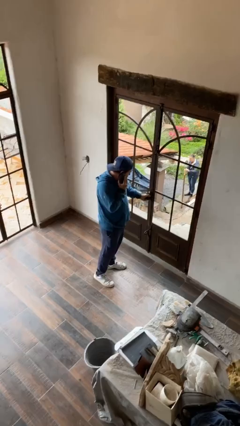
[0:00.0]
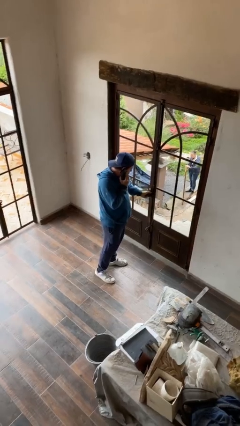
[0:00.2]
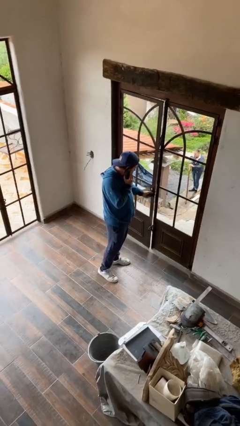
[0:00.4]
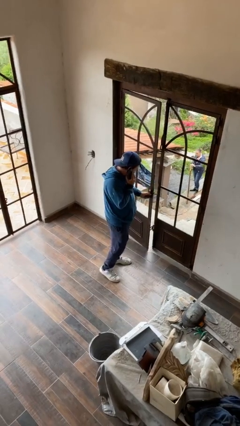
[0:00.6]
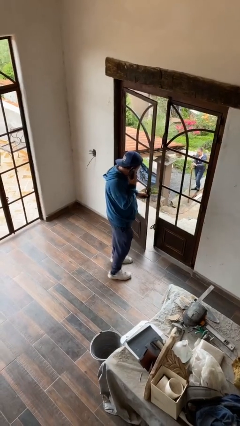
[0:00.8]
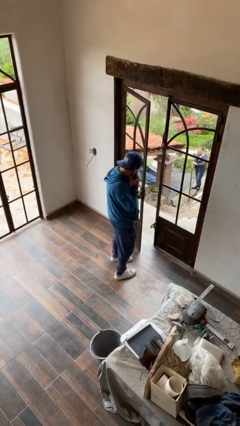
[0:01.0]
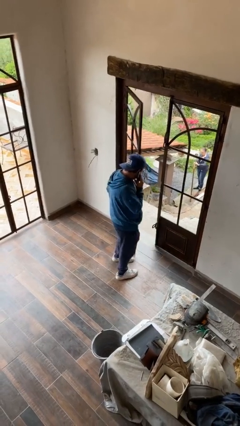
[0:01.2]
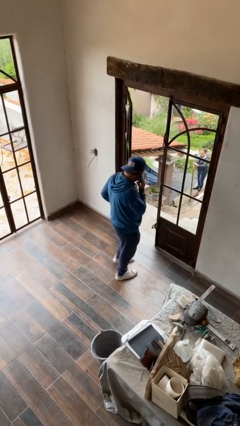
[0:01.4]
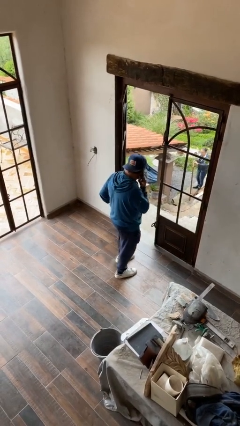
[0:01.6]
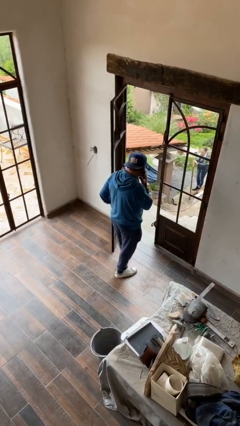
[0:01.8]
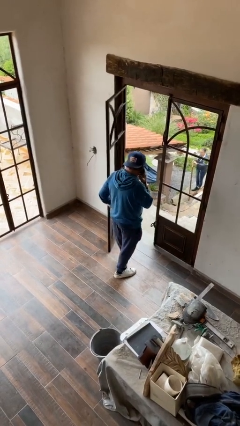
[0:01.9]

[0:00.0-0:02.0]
person opens facility door

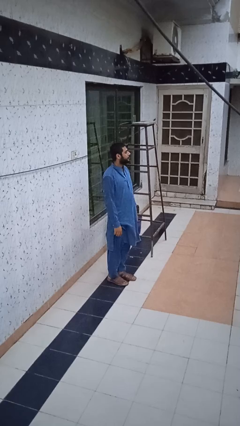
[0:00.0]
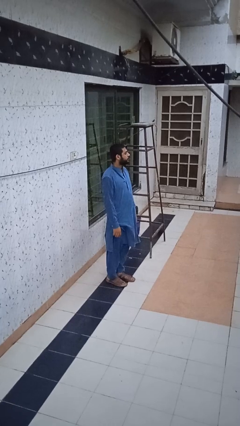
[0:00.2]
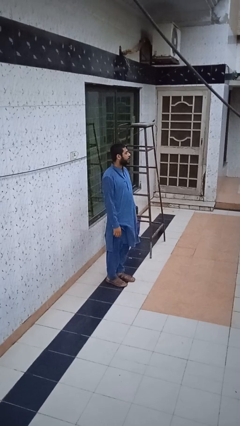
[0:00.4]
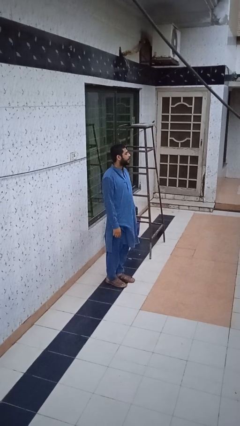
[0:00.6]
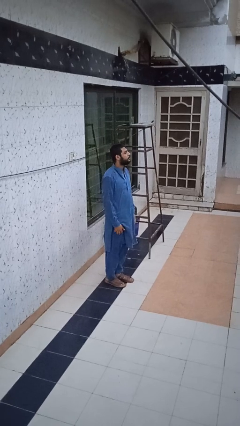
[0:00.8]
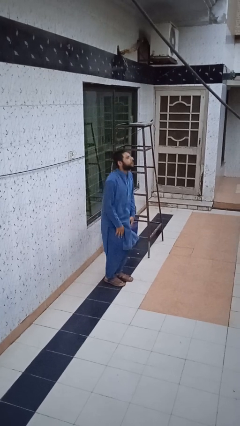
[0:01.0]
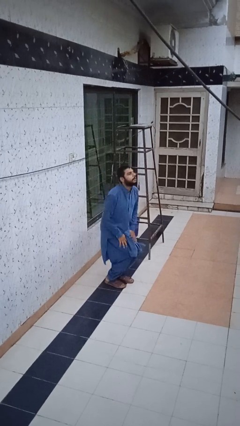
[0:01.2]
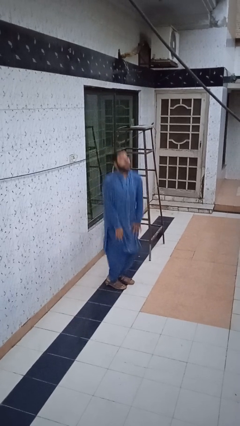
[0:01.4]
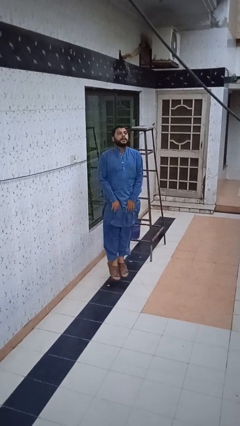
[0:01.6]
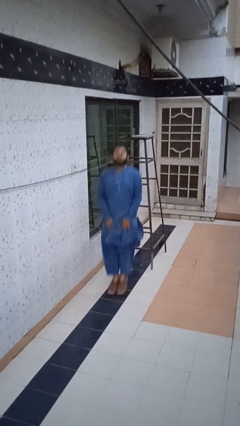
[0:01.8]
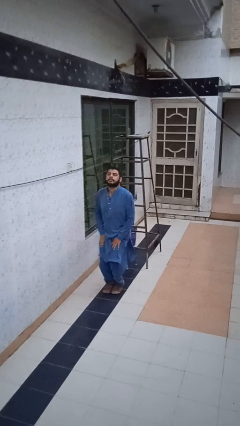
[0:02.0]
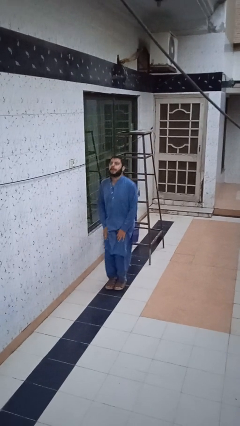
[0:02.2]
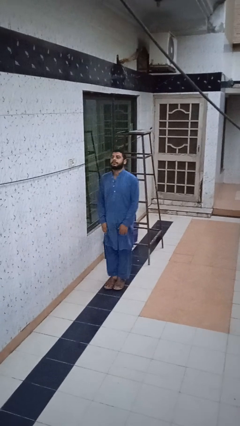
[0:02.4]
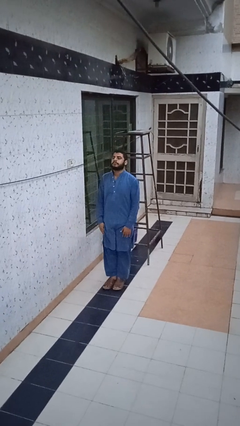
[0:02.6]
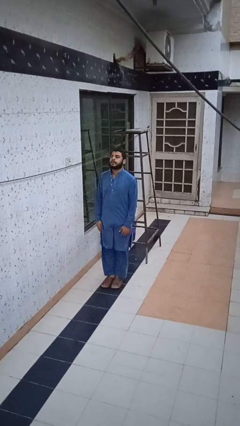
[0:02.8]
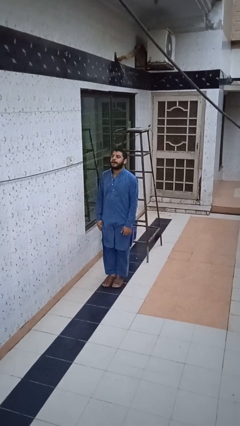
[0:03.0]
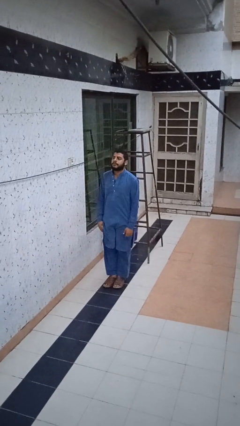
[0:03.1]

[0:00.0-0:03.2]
person jumps

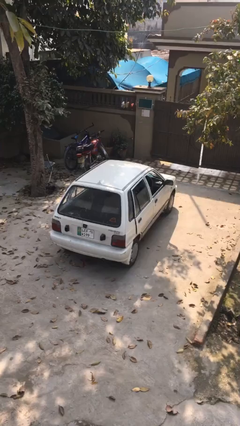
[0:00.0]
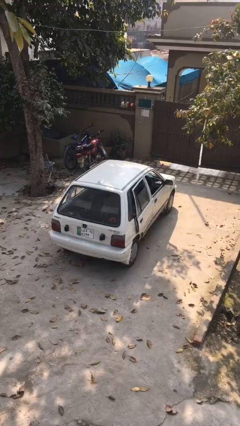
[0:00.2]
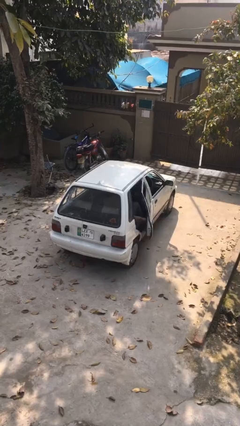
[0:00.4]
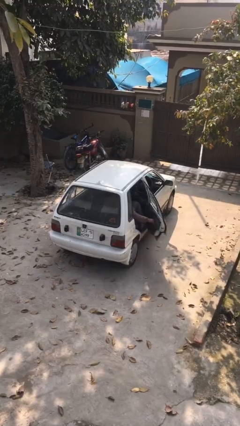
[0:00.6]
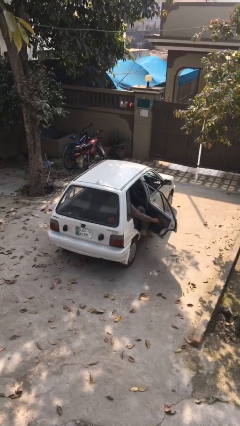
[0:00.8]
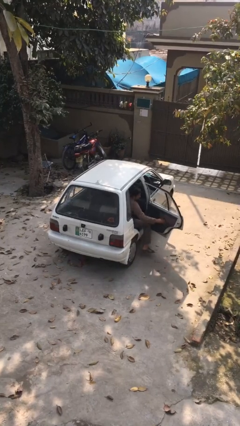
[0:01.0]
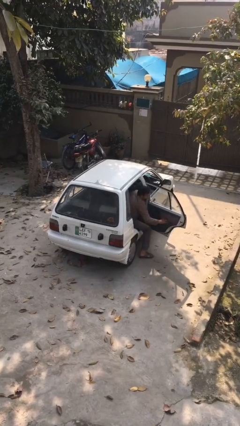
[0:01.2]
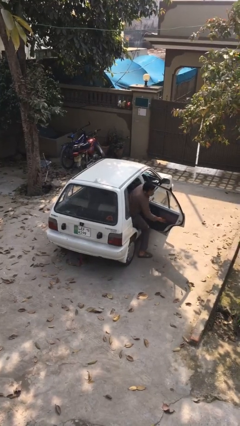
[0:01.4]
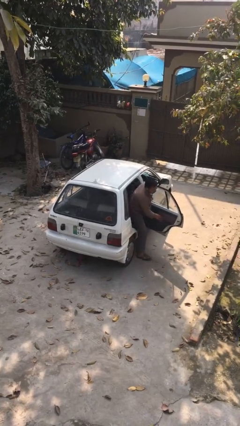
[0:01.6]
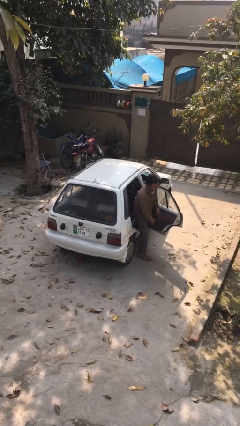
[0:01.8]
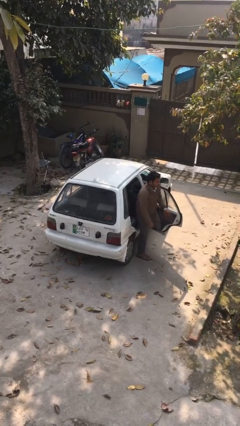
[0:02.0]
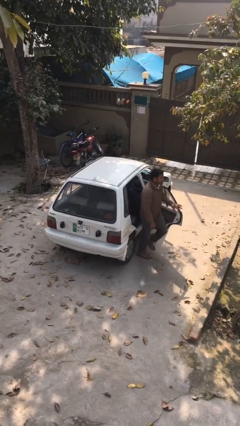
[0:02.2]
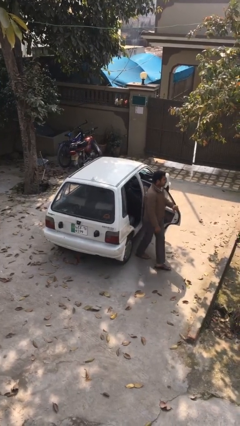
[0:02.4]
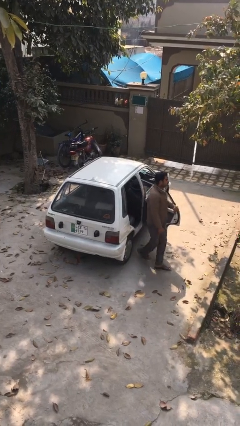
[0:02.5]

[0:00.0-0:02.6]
car drops off person

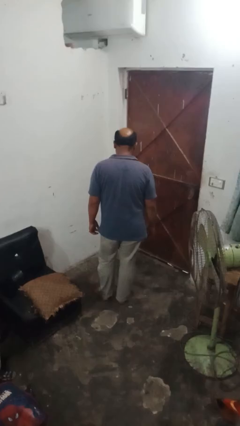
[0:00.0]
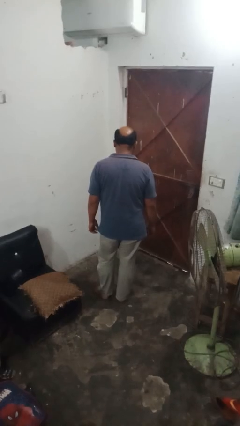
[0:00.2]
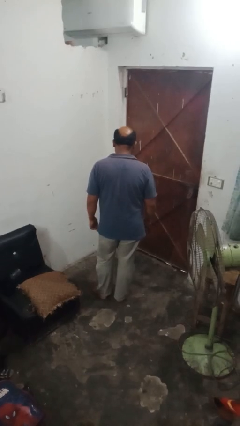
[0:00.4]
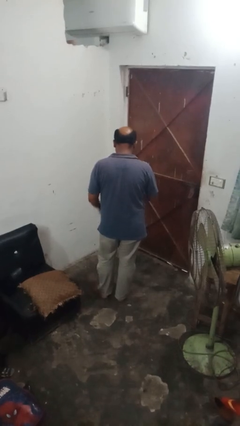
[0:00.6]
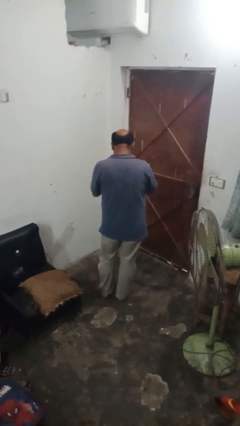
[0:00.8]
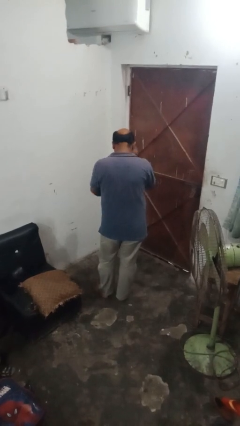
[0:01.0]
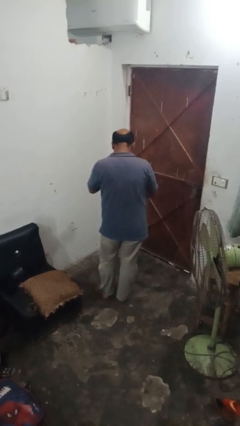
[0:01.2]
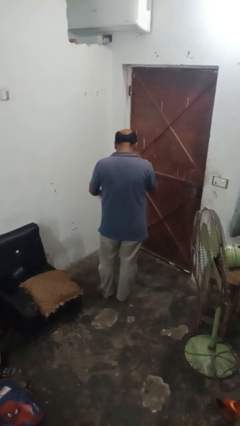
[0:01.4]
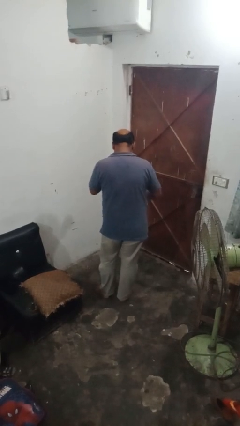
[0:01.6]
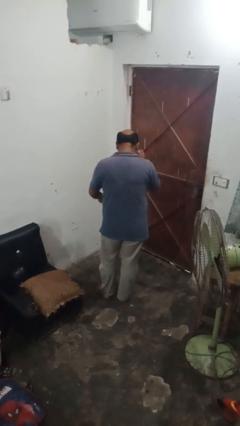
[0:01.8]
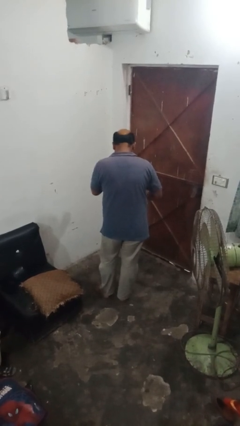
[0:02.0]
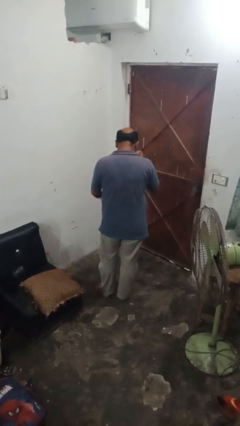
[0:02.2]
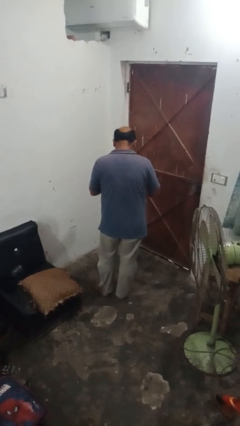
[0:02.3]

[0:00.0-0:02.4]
person drums on chest

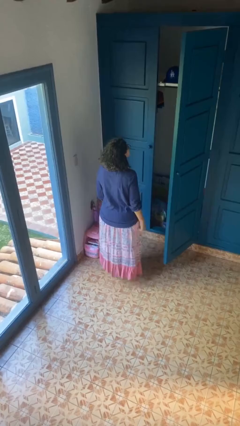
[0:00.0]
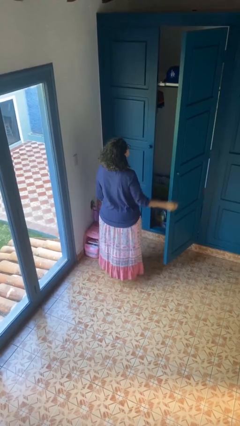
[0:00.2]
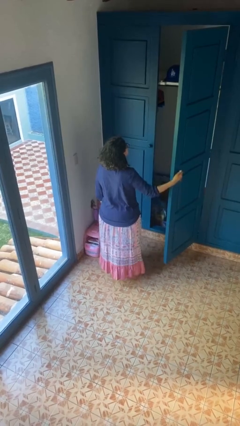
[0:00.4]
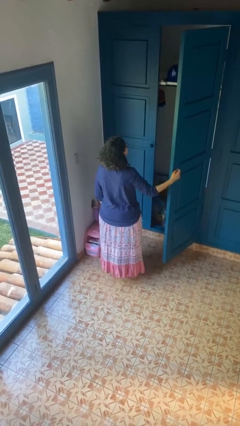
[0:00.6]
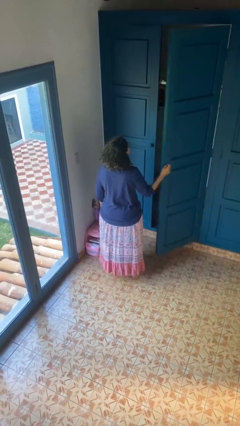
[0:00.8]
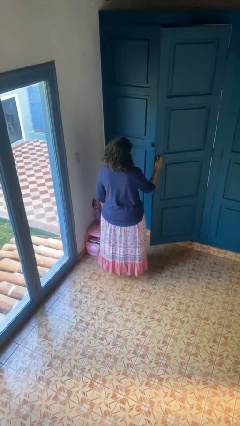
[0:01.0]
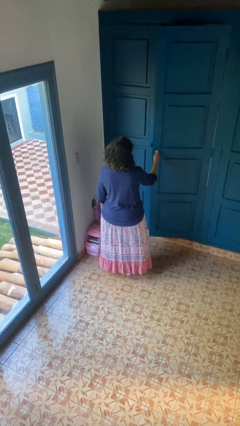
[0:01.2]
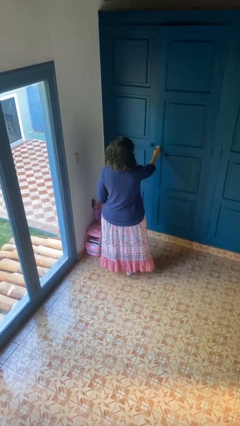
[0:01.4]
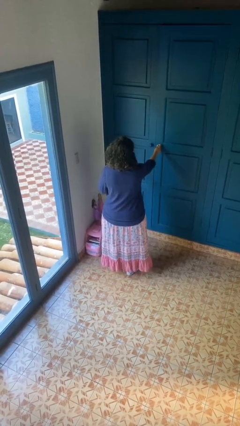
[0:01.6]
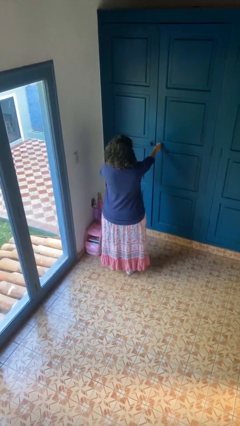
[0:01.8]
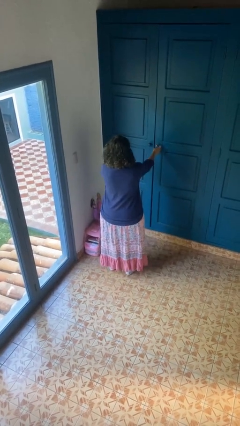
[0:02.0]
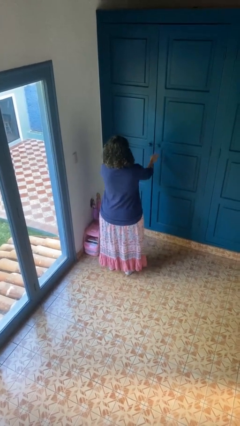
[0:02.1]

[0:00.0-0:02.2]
person closes closet door

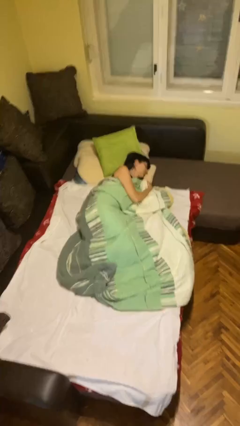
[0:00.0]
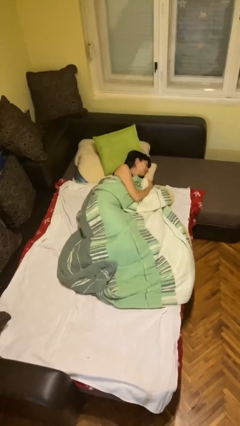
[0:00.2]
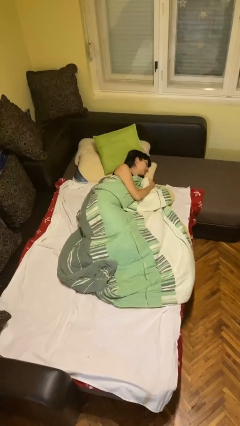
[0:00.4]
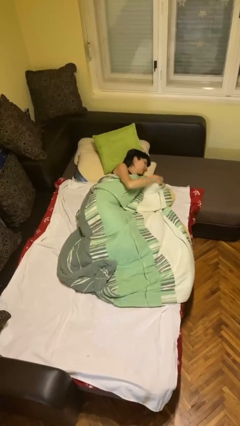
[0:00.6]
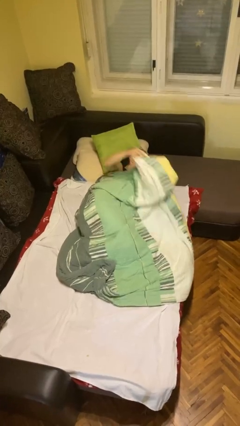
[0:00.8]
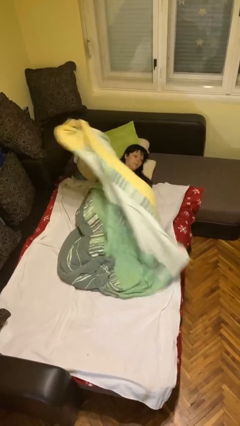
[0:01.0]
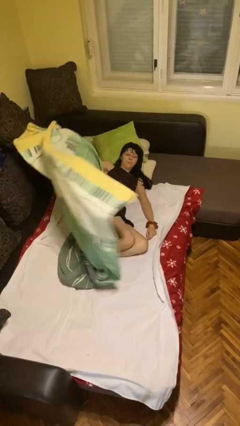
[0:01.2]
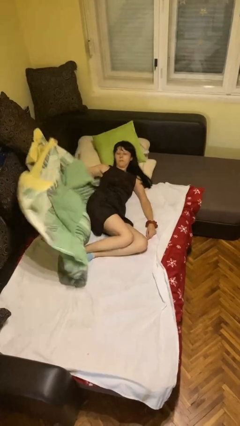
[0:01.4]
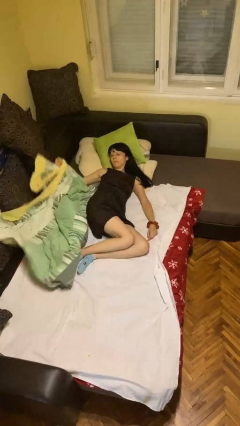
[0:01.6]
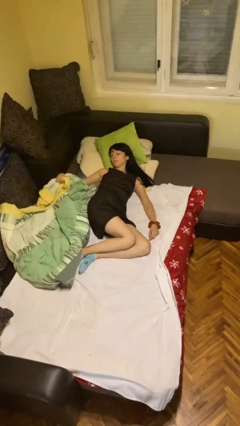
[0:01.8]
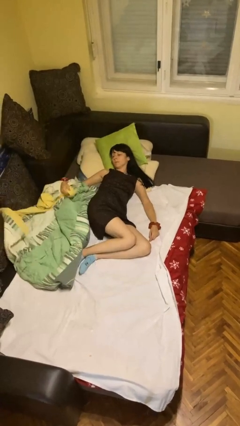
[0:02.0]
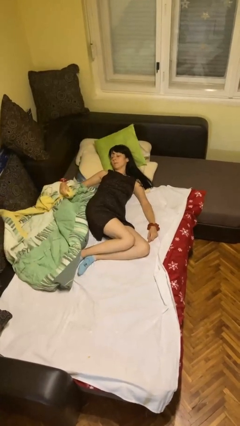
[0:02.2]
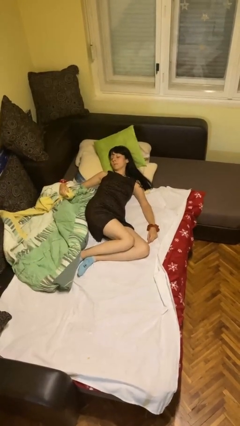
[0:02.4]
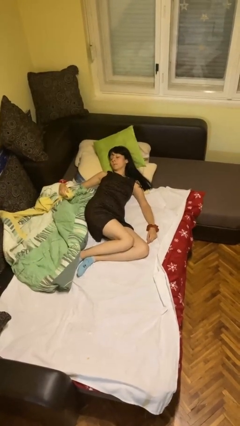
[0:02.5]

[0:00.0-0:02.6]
person uncovers with bedsheets

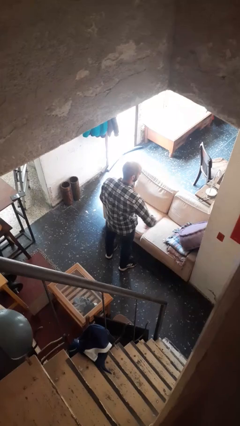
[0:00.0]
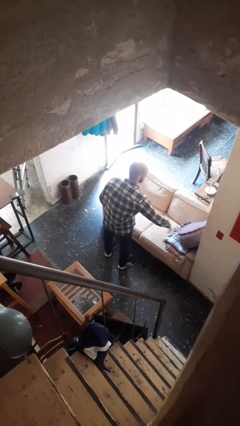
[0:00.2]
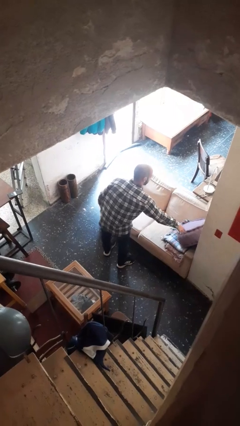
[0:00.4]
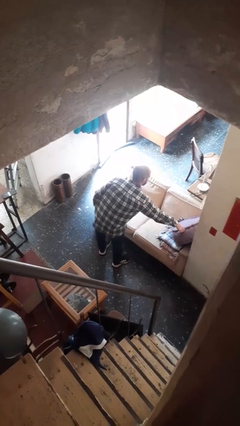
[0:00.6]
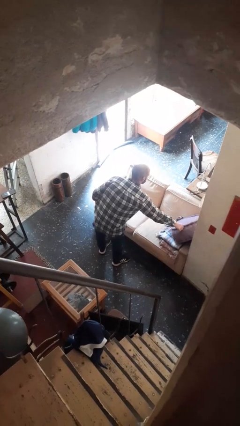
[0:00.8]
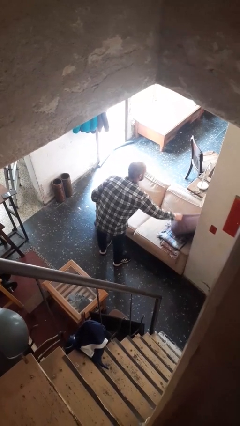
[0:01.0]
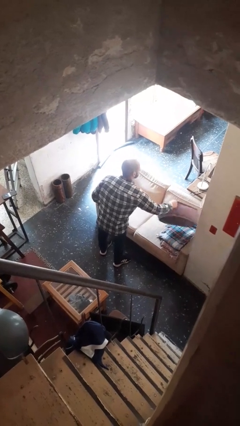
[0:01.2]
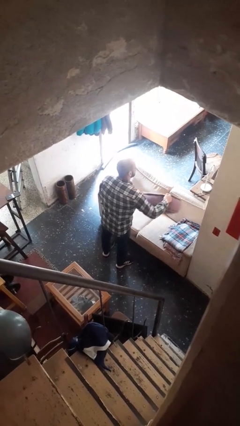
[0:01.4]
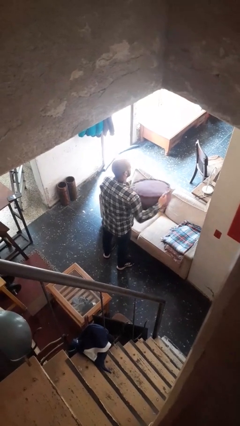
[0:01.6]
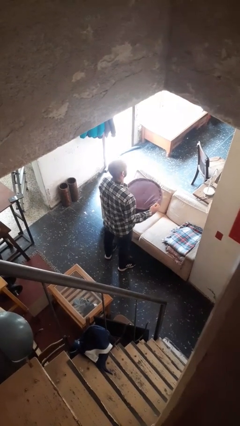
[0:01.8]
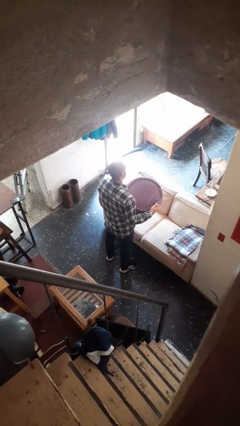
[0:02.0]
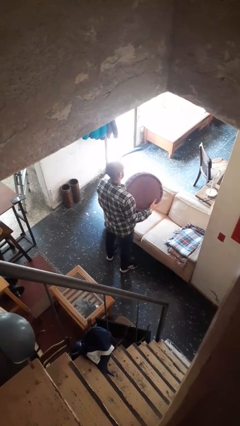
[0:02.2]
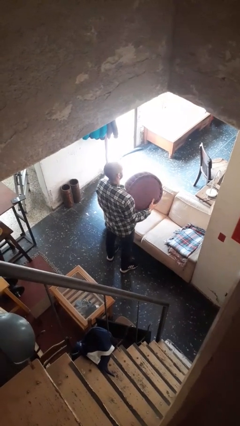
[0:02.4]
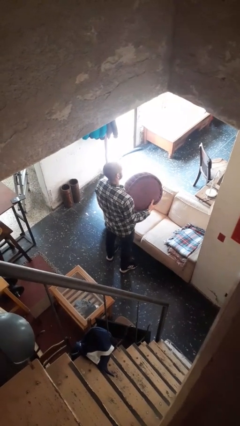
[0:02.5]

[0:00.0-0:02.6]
person picks up object from couch
